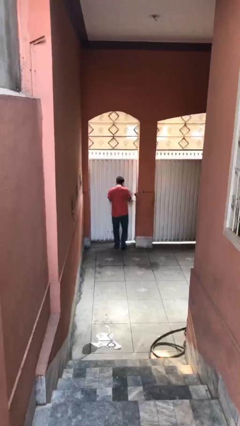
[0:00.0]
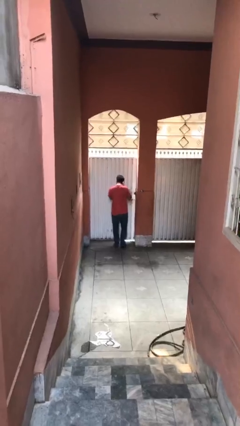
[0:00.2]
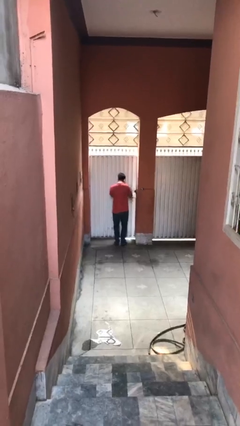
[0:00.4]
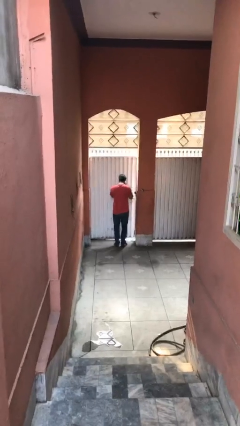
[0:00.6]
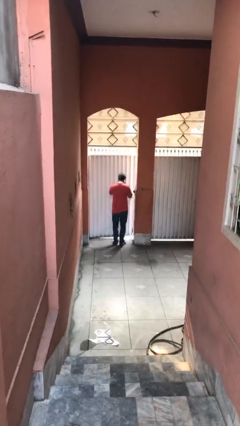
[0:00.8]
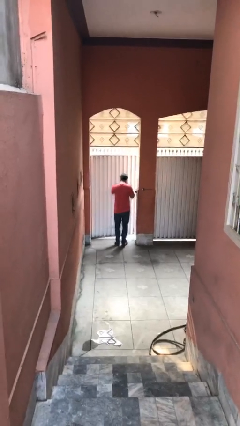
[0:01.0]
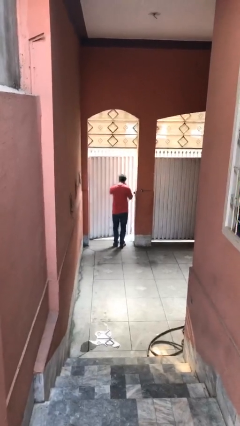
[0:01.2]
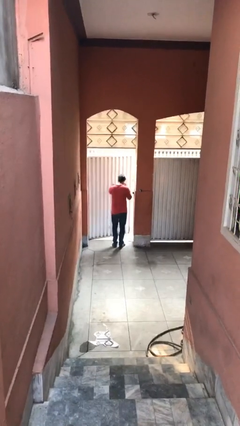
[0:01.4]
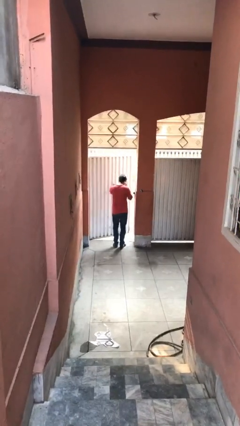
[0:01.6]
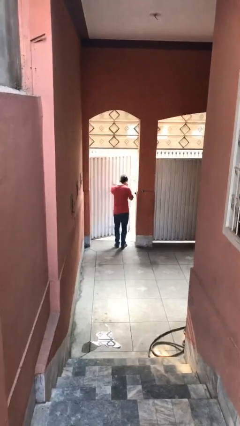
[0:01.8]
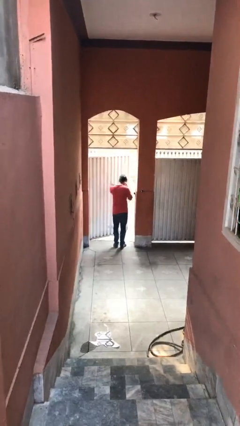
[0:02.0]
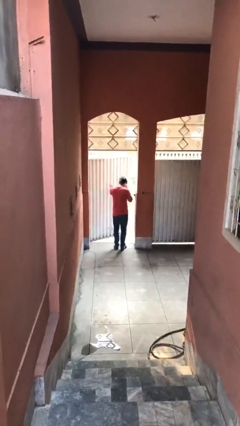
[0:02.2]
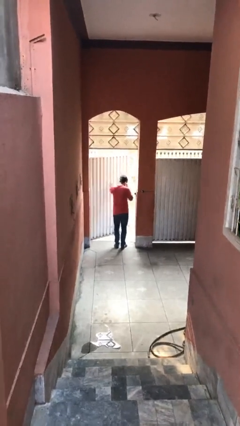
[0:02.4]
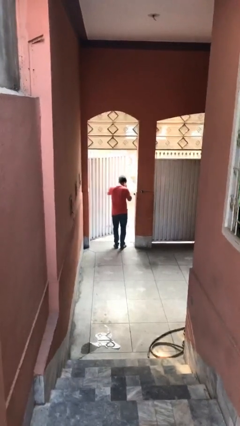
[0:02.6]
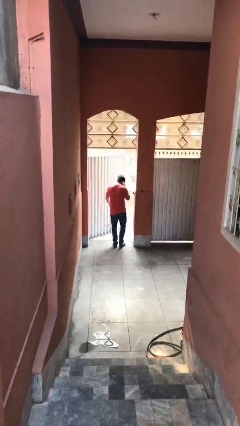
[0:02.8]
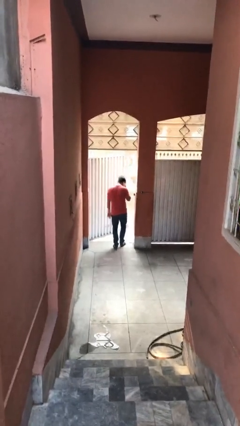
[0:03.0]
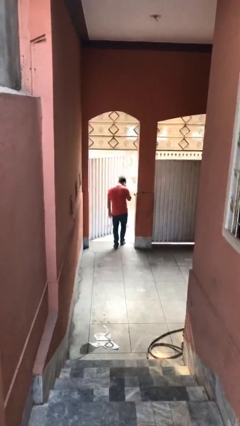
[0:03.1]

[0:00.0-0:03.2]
person opens facility door

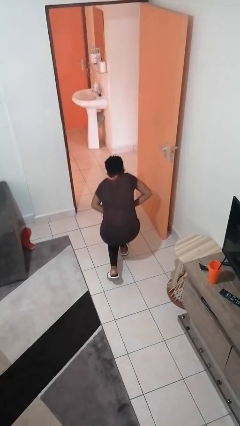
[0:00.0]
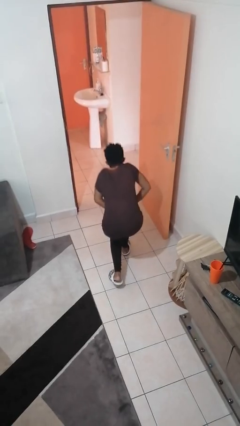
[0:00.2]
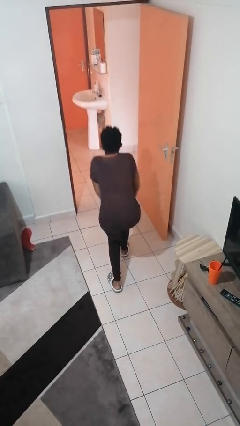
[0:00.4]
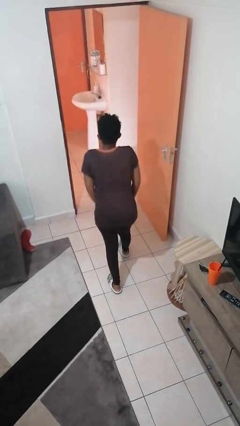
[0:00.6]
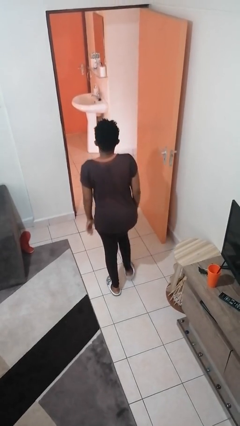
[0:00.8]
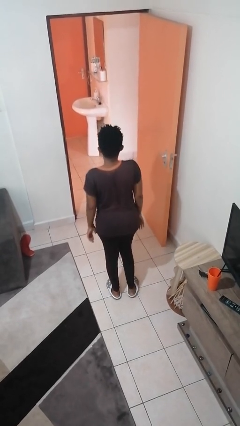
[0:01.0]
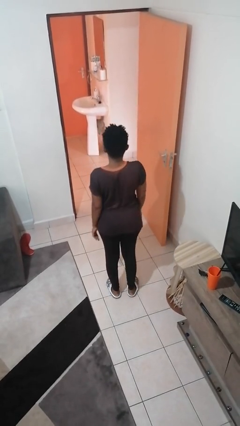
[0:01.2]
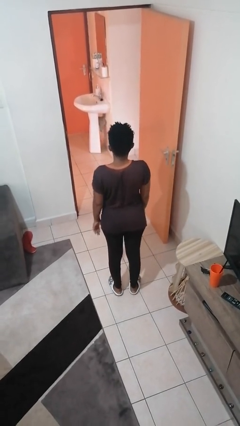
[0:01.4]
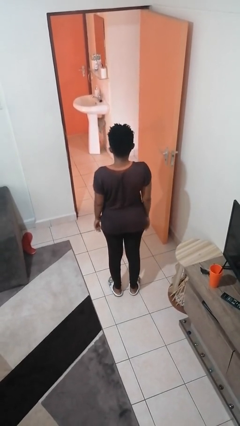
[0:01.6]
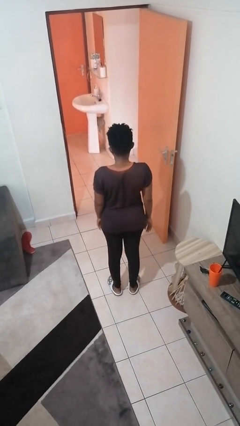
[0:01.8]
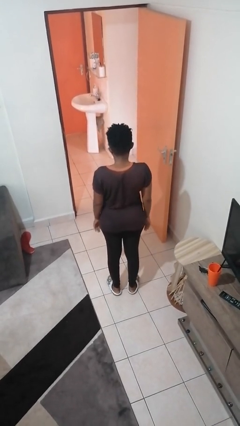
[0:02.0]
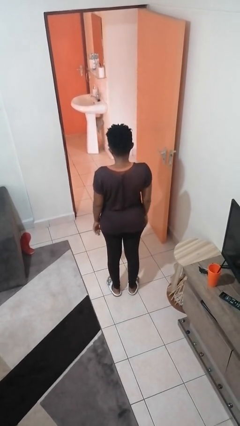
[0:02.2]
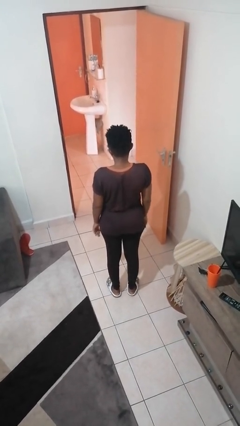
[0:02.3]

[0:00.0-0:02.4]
person stands up from floor

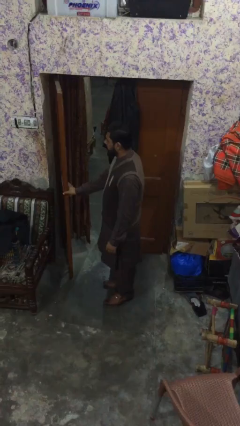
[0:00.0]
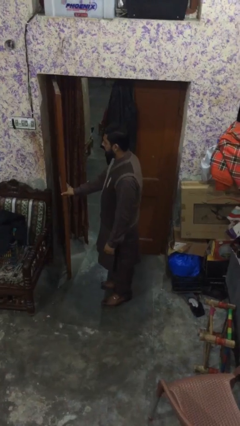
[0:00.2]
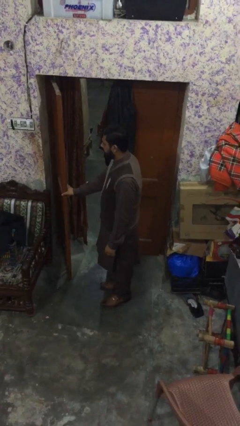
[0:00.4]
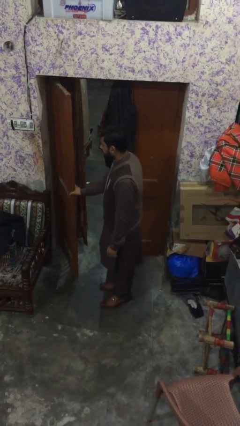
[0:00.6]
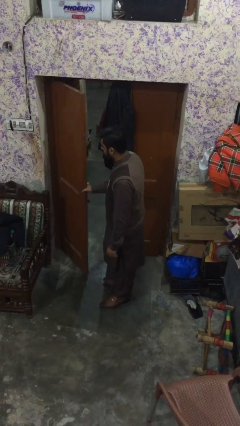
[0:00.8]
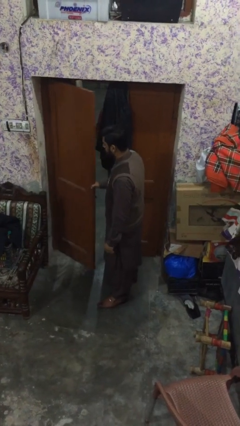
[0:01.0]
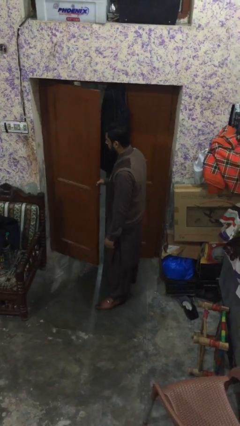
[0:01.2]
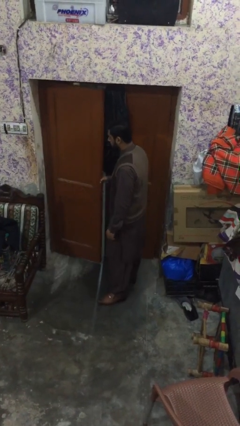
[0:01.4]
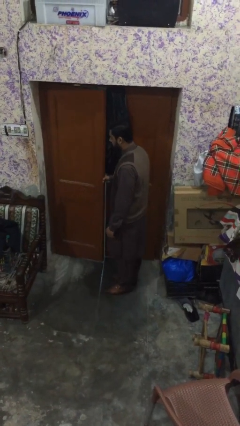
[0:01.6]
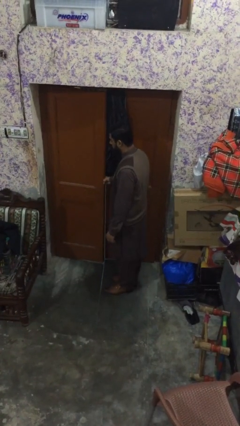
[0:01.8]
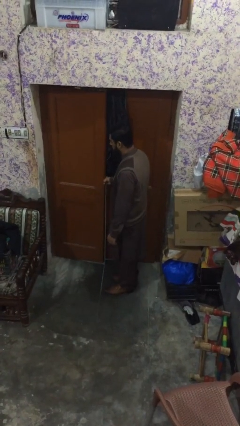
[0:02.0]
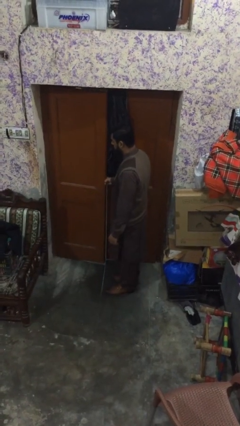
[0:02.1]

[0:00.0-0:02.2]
person closes facility door

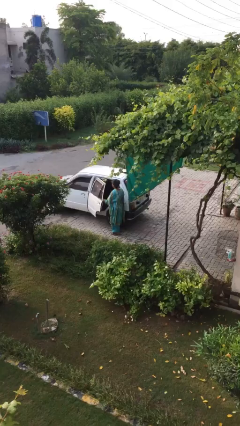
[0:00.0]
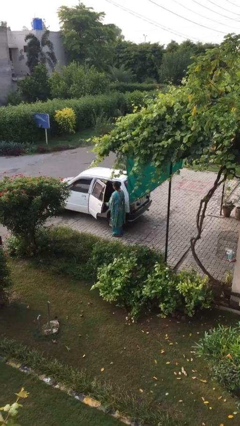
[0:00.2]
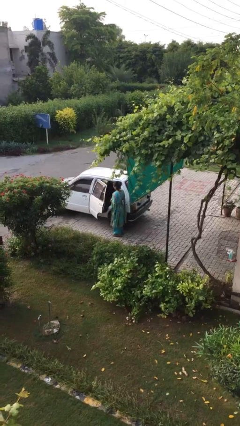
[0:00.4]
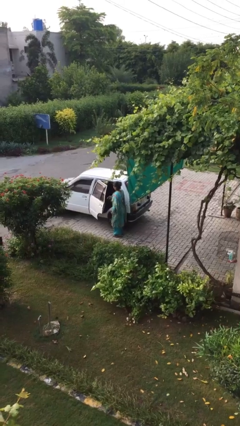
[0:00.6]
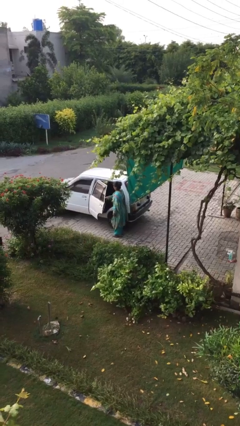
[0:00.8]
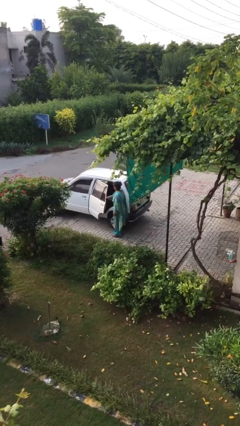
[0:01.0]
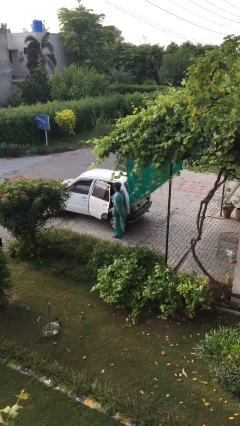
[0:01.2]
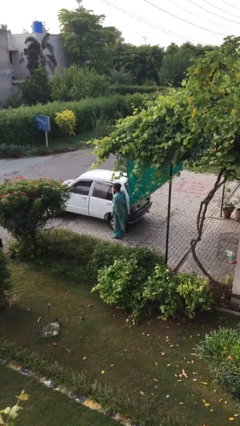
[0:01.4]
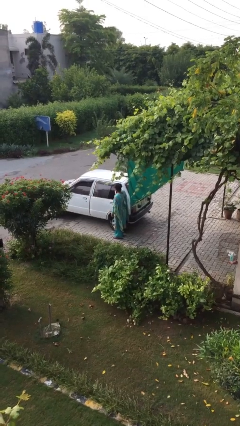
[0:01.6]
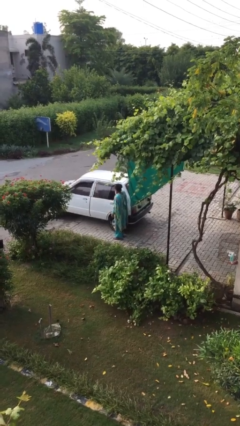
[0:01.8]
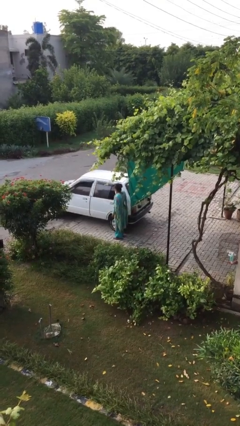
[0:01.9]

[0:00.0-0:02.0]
person closes car door

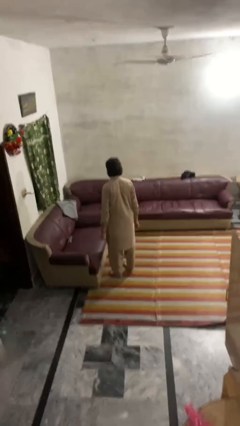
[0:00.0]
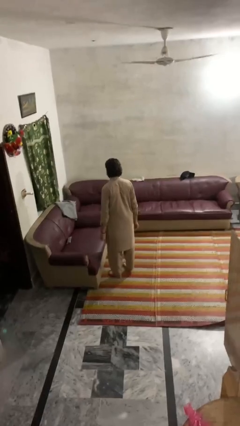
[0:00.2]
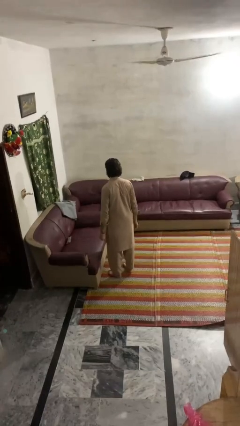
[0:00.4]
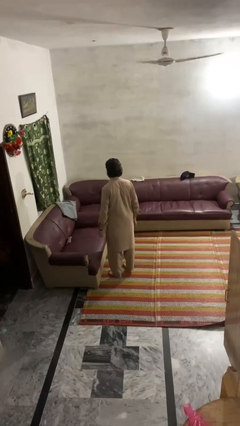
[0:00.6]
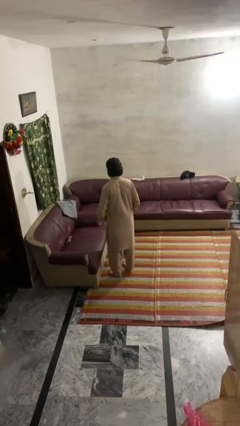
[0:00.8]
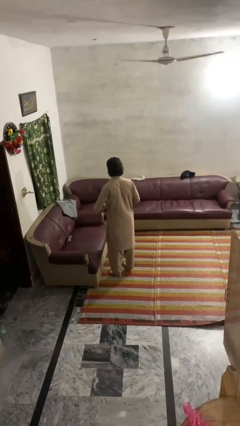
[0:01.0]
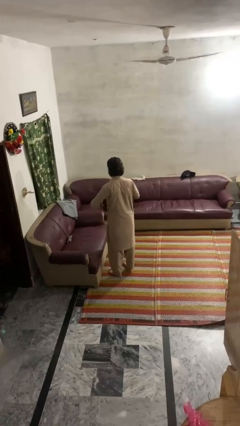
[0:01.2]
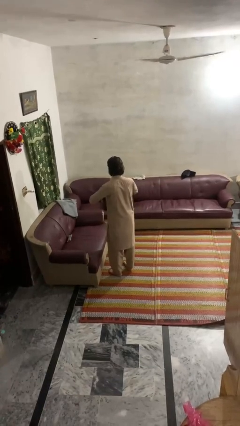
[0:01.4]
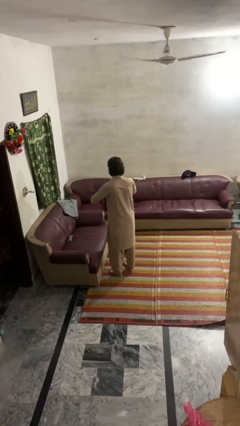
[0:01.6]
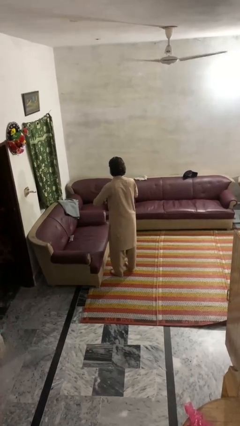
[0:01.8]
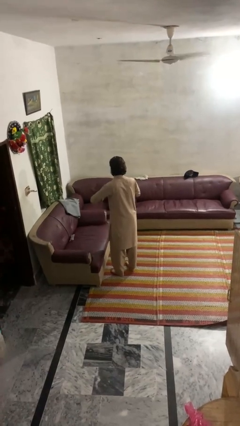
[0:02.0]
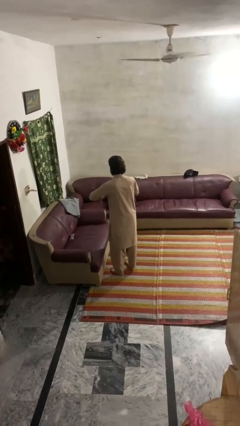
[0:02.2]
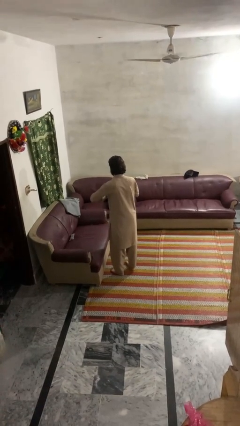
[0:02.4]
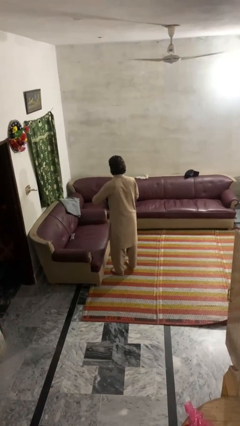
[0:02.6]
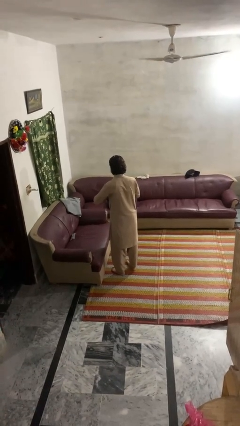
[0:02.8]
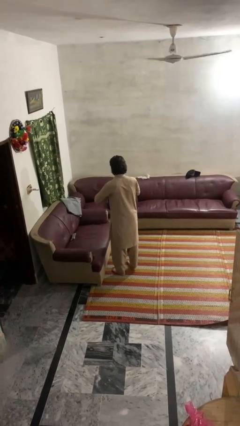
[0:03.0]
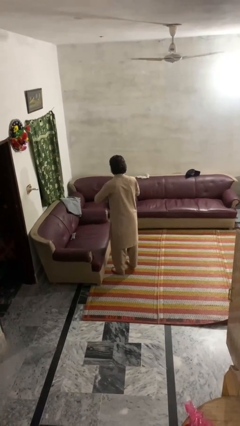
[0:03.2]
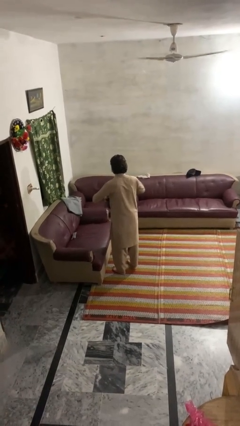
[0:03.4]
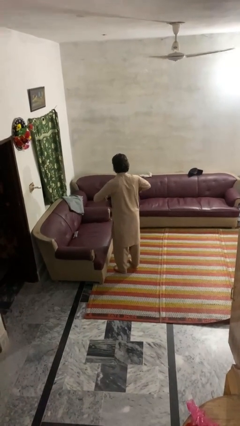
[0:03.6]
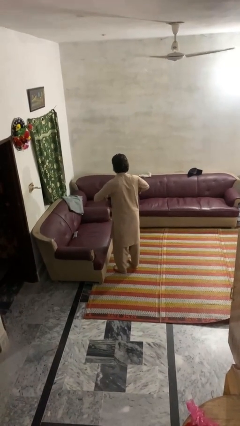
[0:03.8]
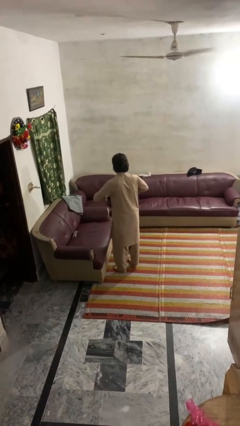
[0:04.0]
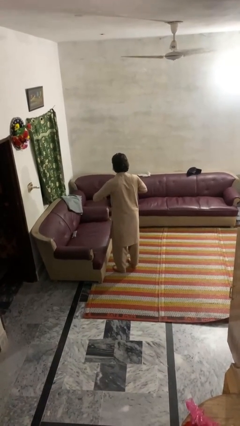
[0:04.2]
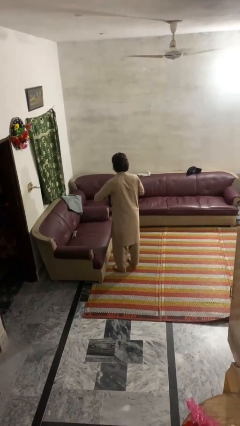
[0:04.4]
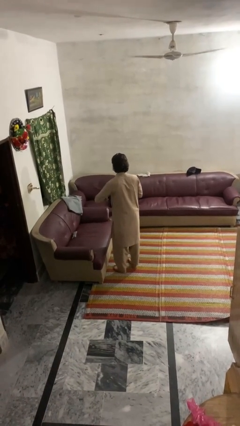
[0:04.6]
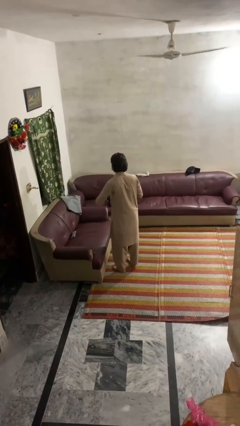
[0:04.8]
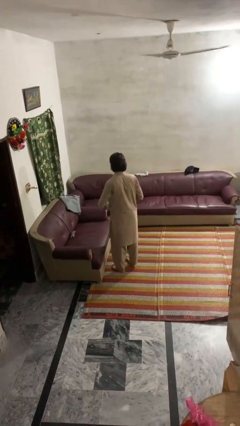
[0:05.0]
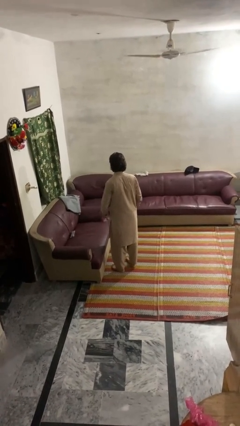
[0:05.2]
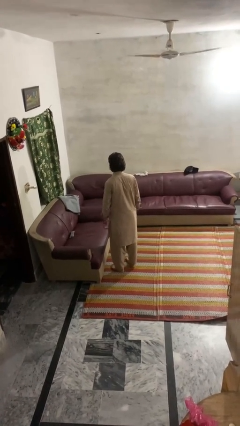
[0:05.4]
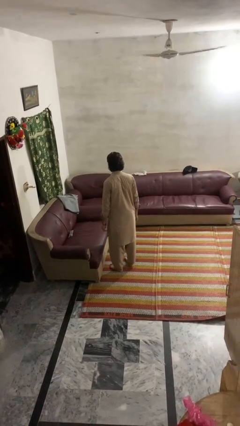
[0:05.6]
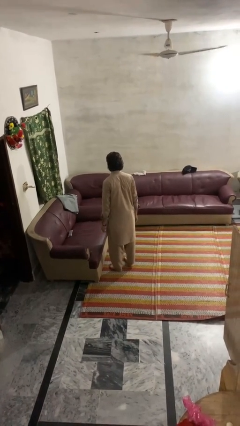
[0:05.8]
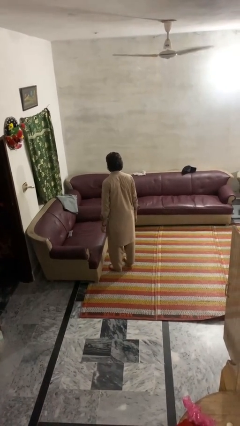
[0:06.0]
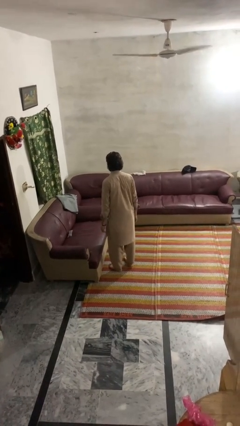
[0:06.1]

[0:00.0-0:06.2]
person cracks knuckles

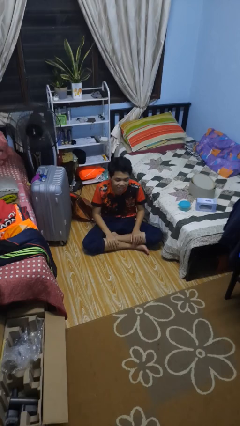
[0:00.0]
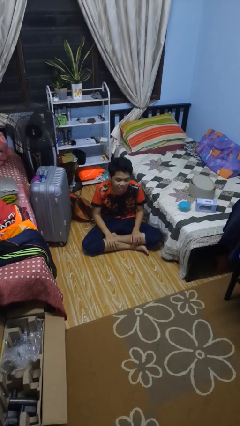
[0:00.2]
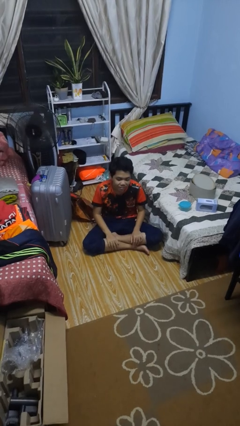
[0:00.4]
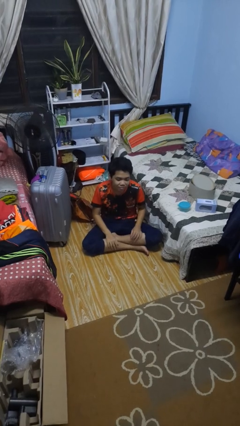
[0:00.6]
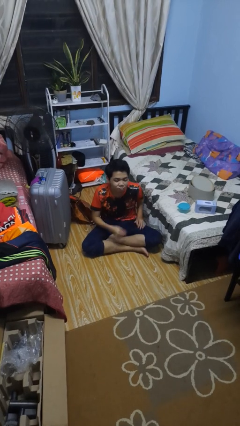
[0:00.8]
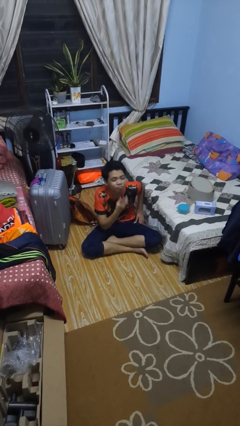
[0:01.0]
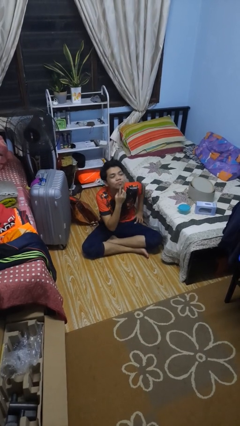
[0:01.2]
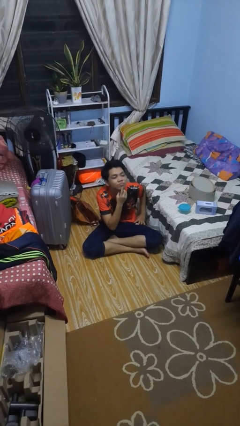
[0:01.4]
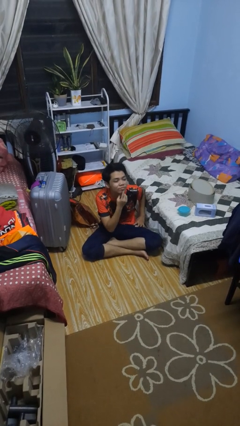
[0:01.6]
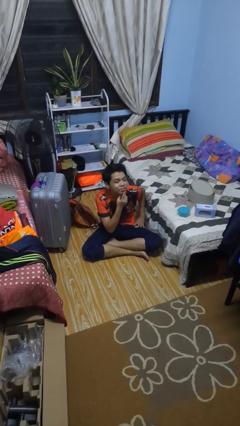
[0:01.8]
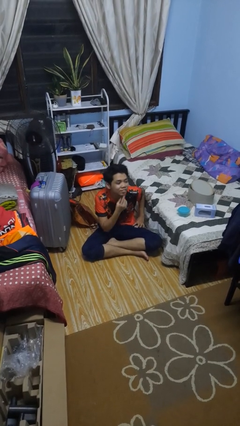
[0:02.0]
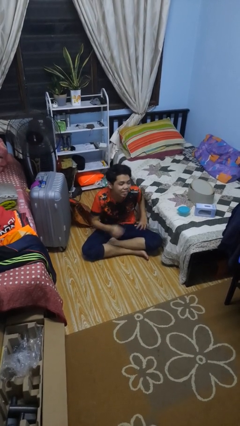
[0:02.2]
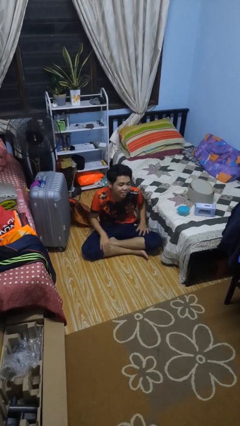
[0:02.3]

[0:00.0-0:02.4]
person strokes chin
